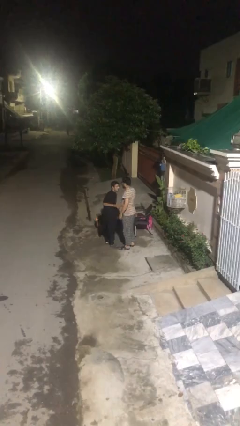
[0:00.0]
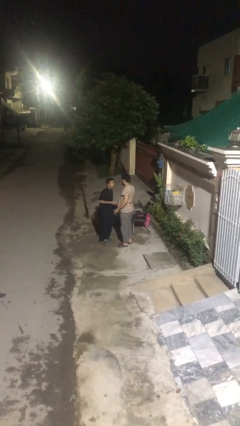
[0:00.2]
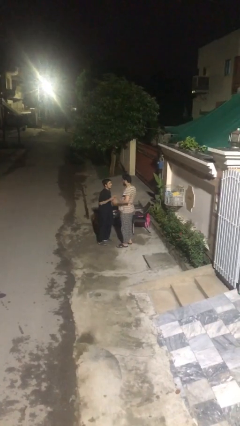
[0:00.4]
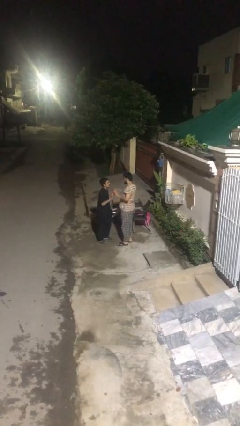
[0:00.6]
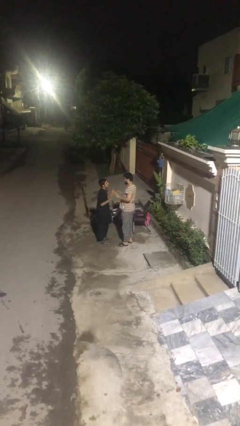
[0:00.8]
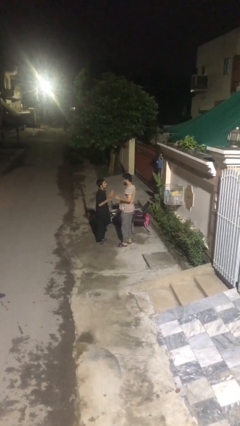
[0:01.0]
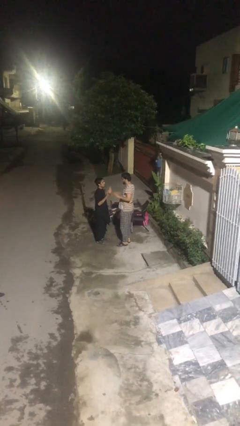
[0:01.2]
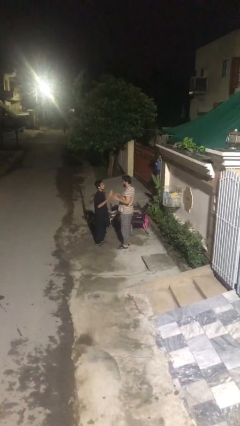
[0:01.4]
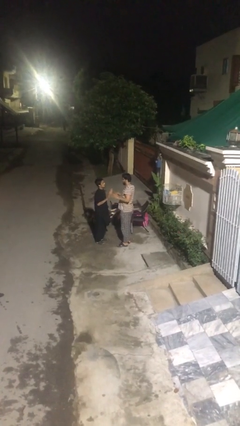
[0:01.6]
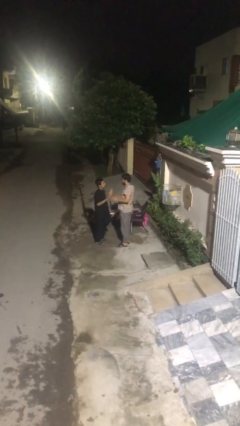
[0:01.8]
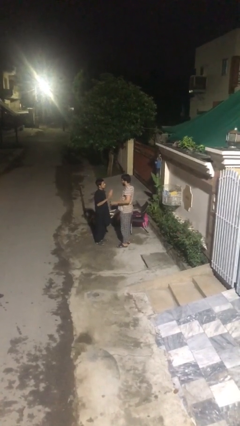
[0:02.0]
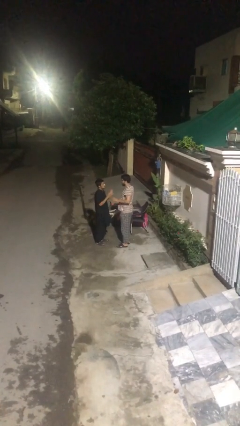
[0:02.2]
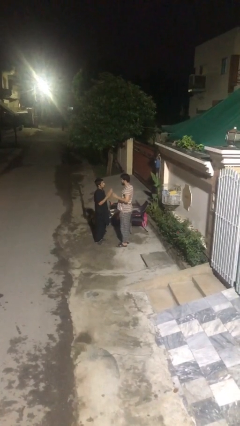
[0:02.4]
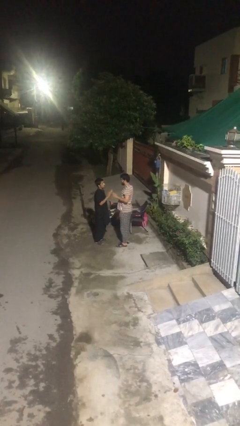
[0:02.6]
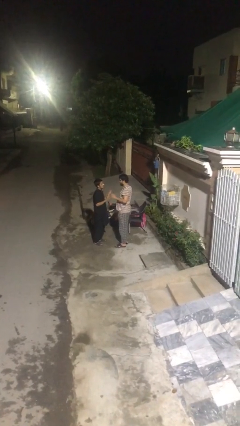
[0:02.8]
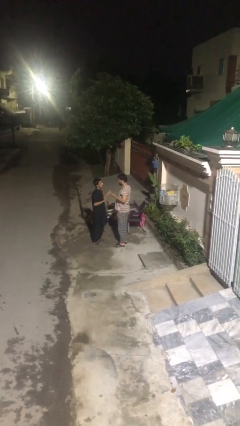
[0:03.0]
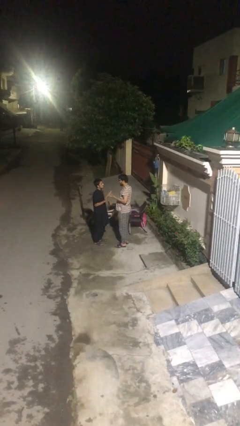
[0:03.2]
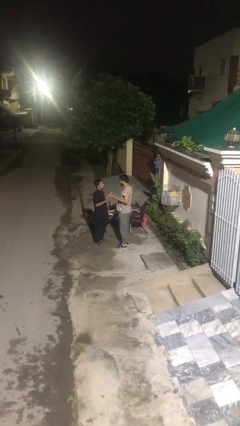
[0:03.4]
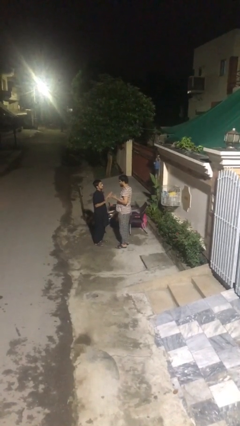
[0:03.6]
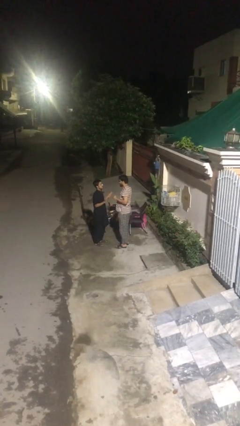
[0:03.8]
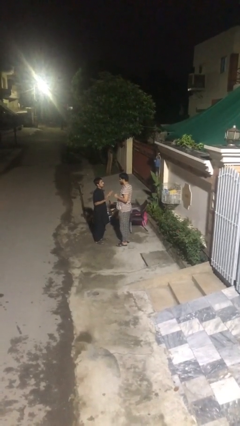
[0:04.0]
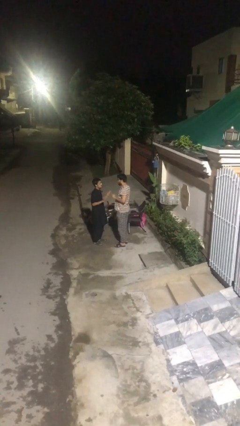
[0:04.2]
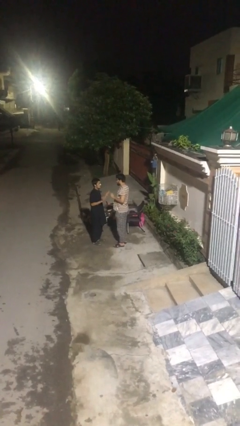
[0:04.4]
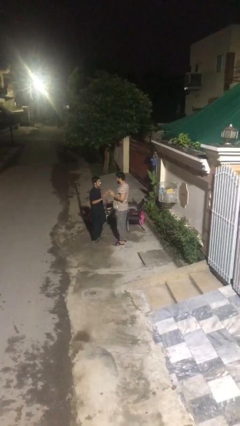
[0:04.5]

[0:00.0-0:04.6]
person talks to person

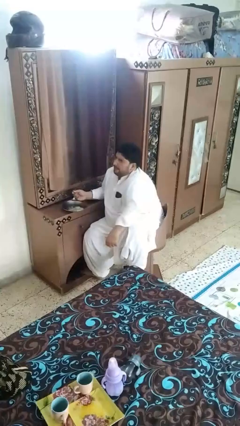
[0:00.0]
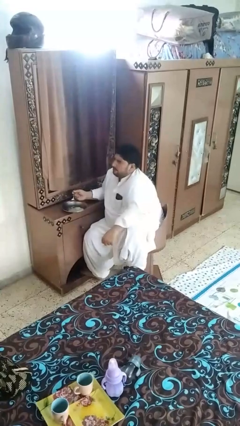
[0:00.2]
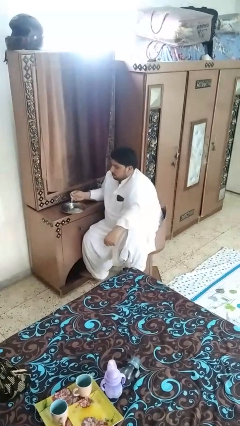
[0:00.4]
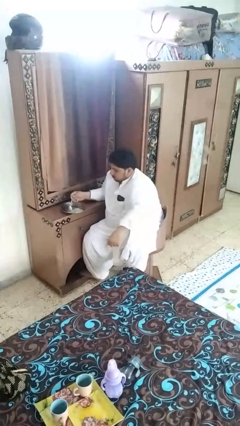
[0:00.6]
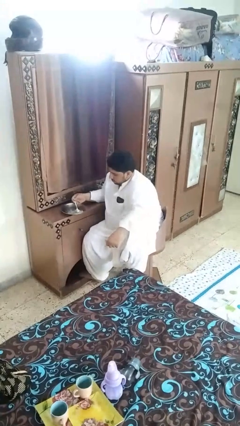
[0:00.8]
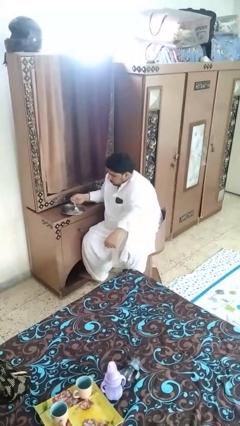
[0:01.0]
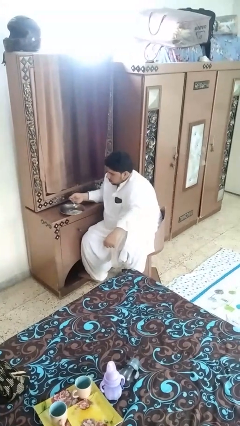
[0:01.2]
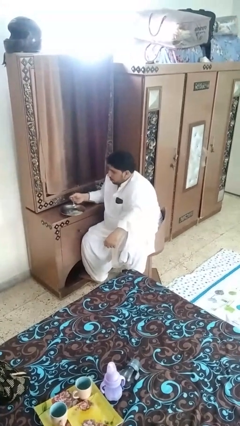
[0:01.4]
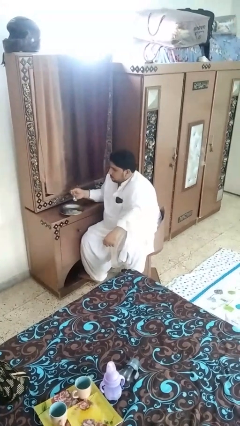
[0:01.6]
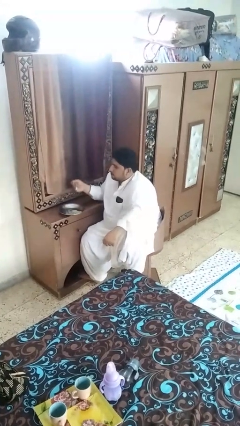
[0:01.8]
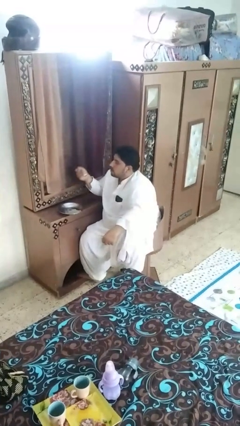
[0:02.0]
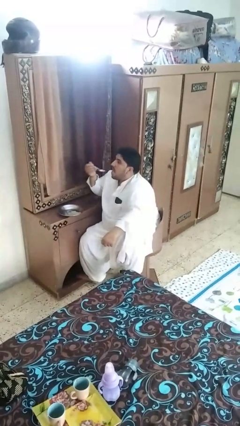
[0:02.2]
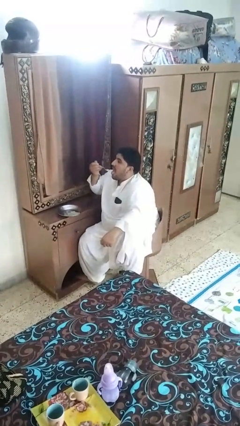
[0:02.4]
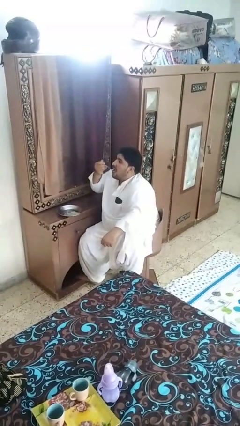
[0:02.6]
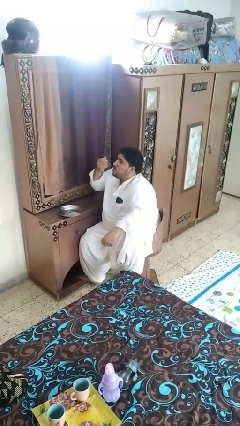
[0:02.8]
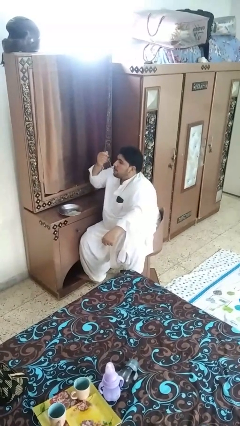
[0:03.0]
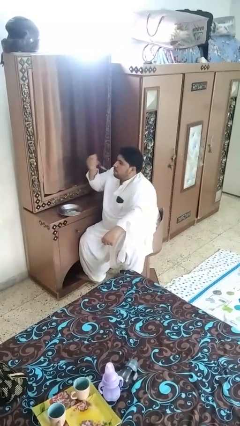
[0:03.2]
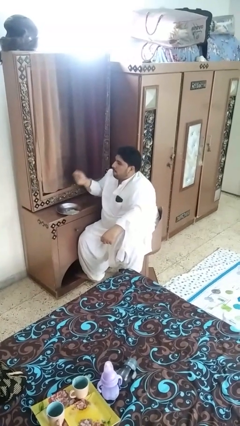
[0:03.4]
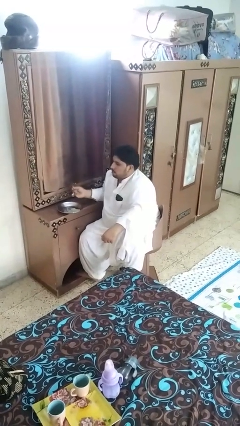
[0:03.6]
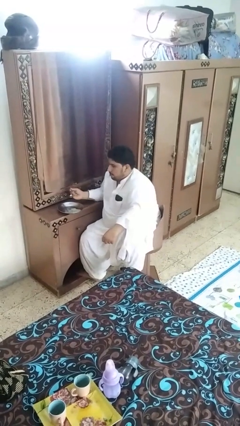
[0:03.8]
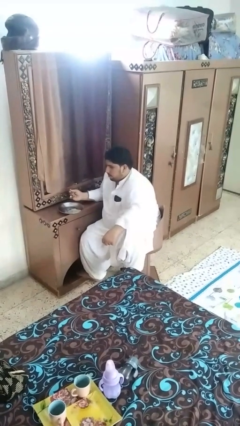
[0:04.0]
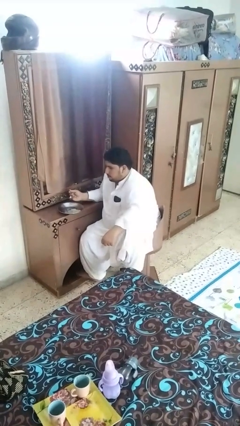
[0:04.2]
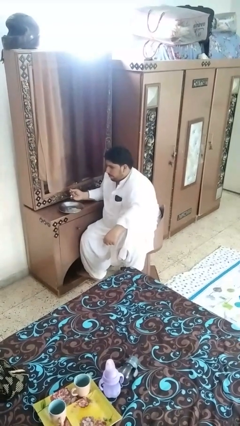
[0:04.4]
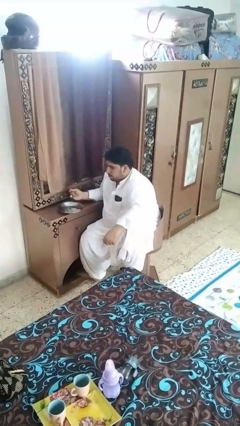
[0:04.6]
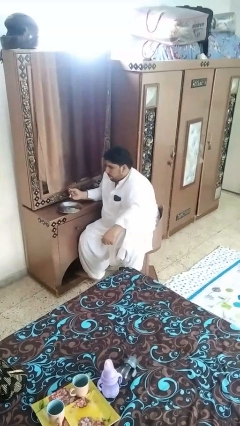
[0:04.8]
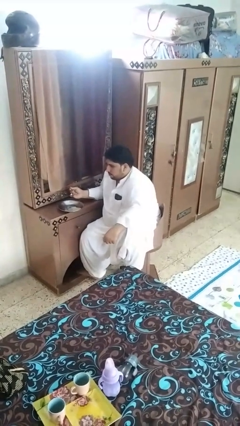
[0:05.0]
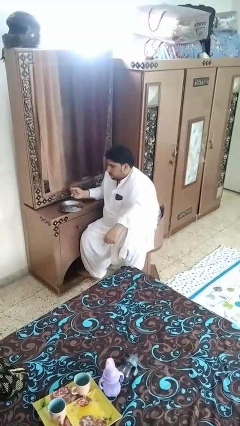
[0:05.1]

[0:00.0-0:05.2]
person eats with utensil

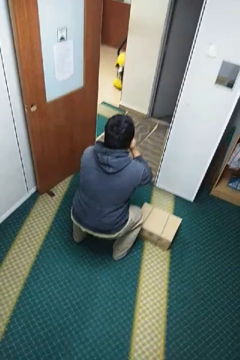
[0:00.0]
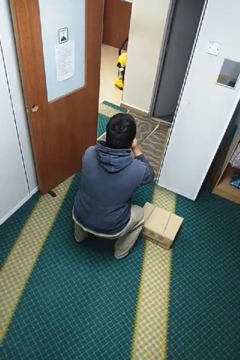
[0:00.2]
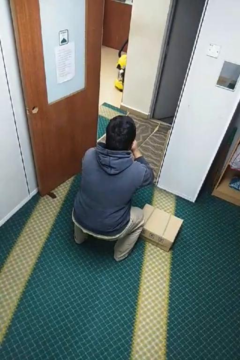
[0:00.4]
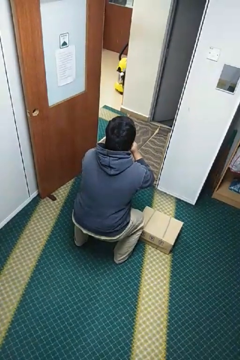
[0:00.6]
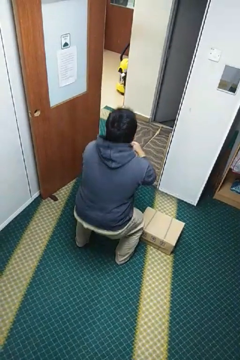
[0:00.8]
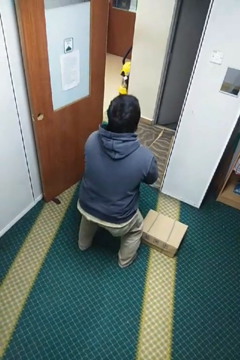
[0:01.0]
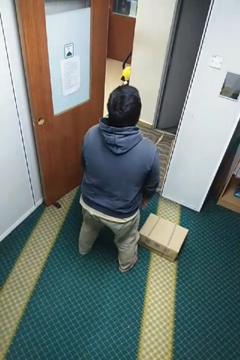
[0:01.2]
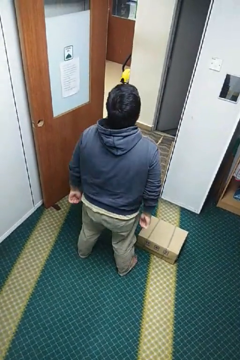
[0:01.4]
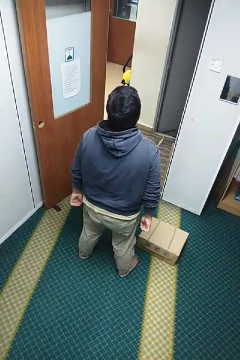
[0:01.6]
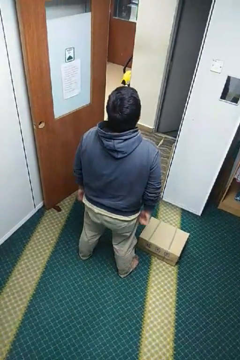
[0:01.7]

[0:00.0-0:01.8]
person stands up

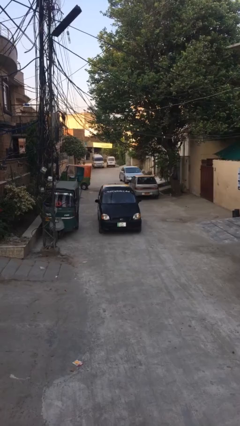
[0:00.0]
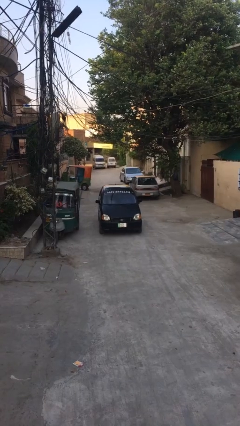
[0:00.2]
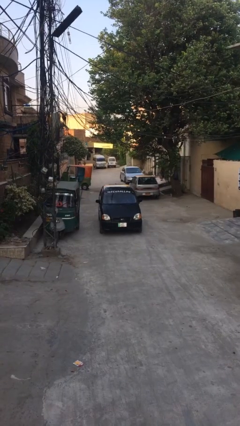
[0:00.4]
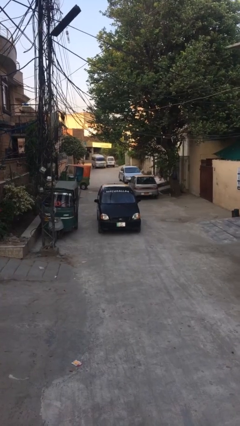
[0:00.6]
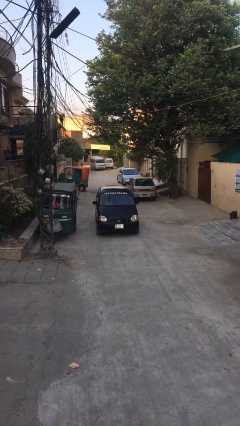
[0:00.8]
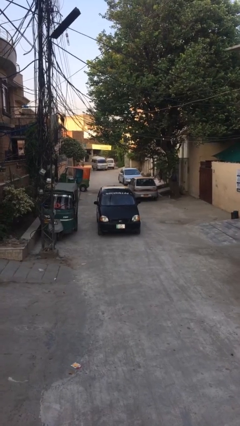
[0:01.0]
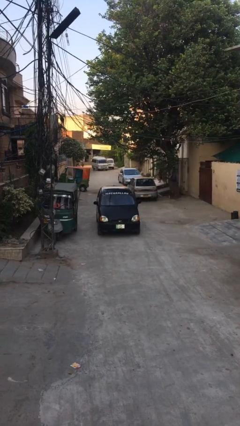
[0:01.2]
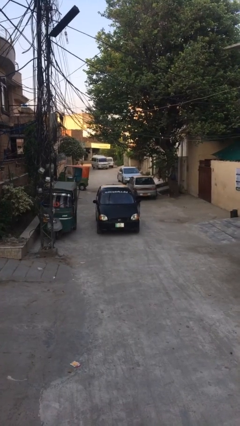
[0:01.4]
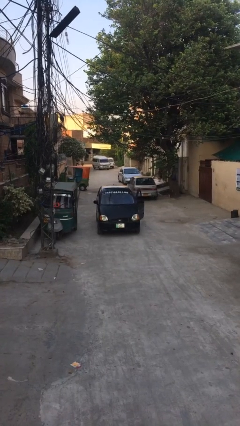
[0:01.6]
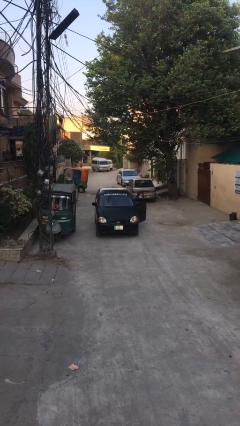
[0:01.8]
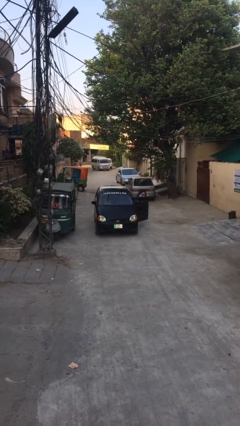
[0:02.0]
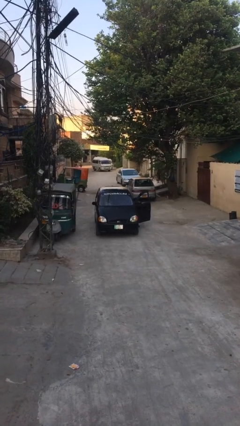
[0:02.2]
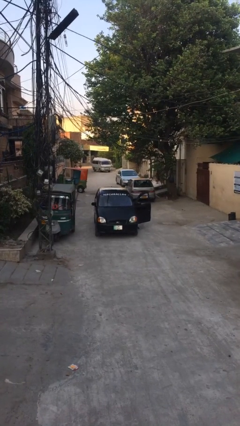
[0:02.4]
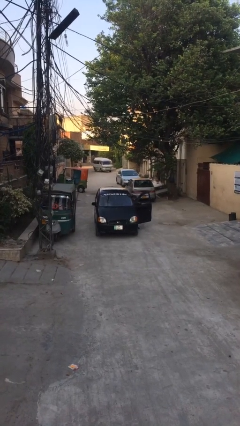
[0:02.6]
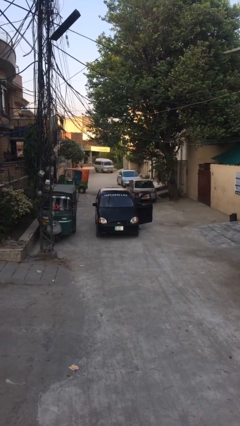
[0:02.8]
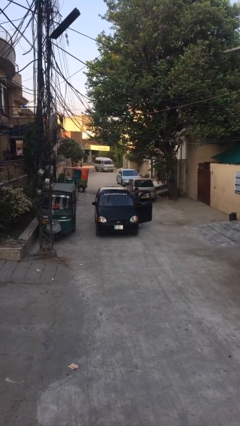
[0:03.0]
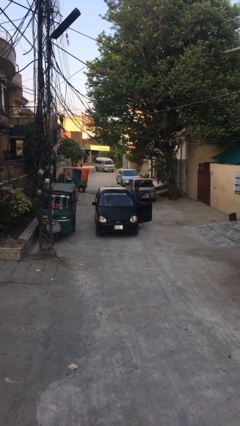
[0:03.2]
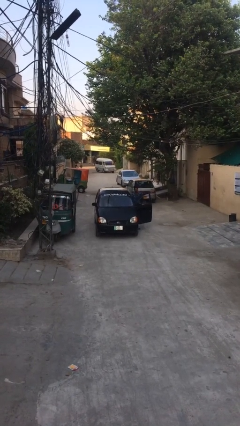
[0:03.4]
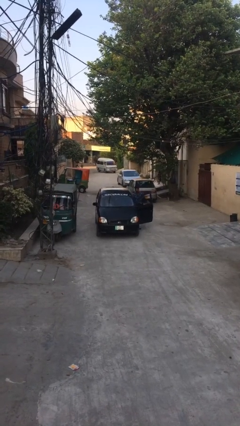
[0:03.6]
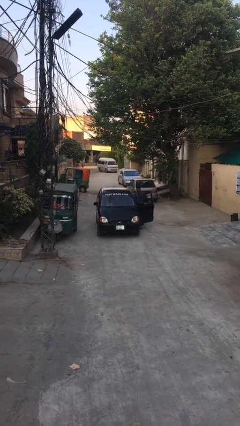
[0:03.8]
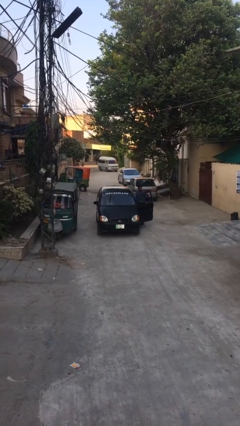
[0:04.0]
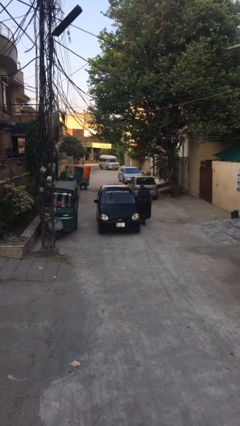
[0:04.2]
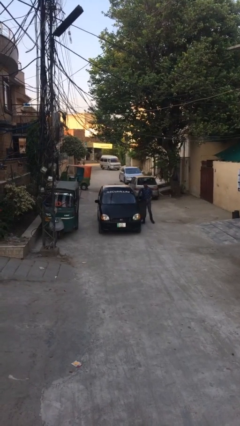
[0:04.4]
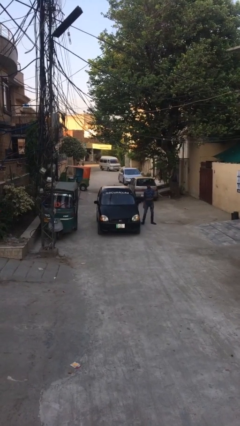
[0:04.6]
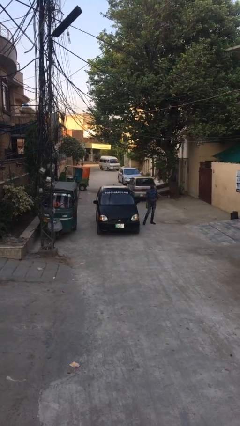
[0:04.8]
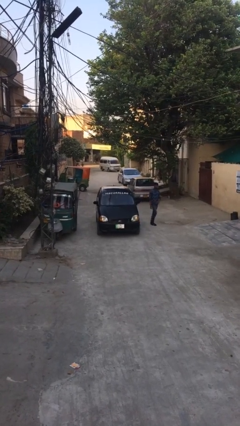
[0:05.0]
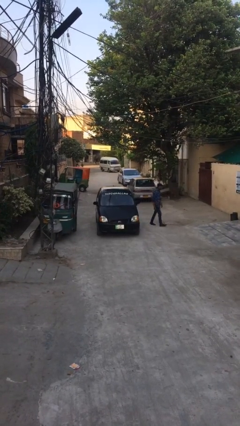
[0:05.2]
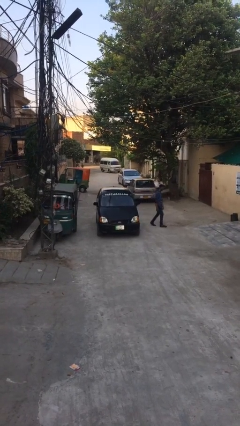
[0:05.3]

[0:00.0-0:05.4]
car drops off person

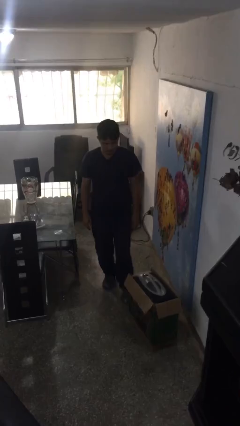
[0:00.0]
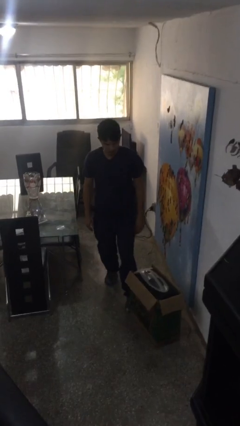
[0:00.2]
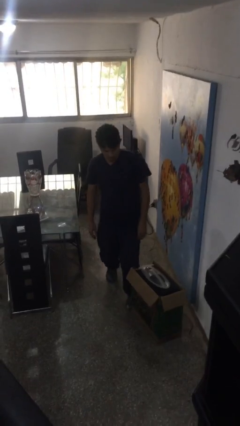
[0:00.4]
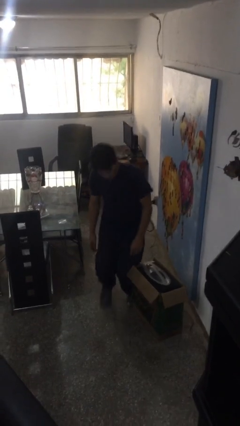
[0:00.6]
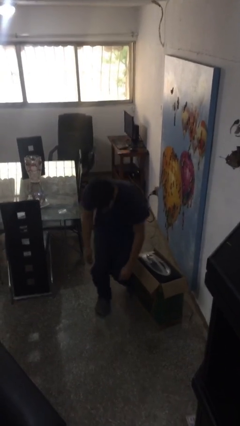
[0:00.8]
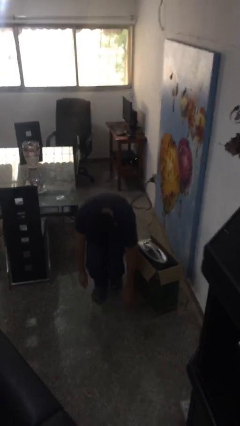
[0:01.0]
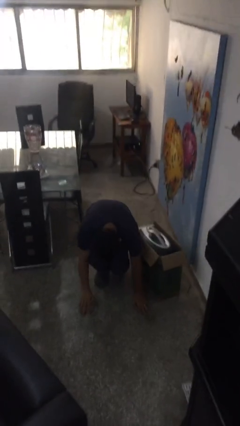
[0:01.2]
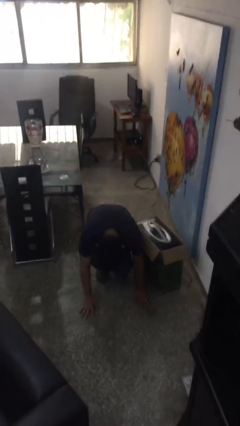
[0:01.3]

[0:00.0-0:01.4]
person trips on object on floor
